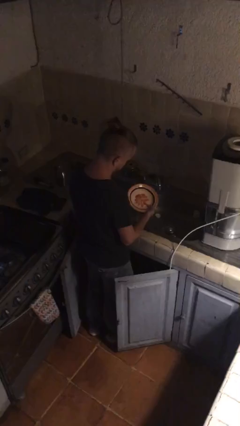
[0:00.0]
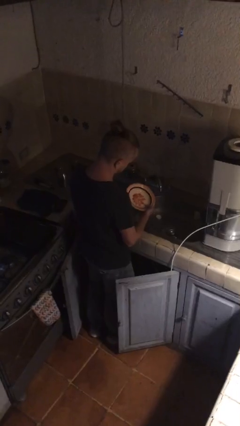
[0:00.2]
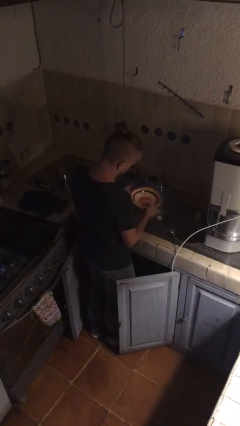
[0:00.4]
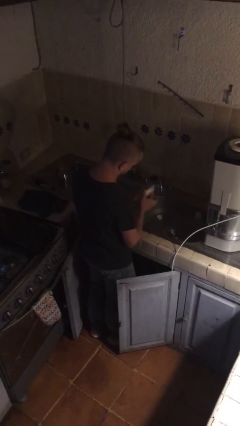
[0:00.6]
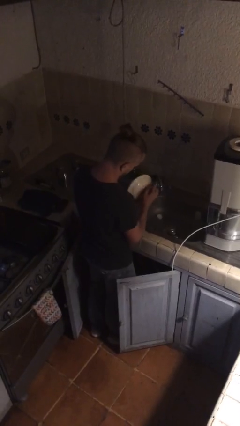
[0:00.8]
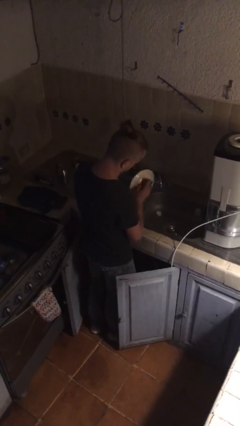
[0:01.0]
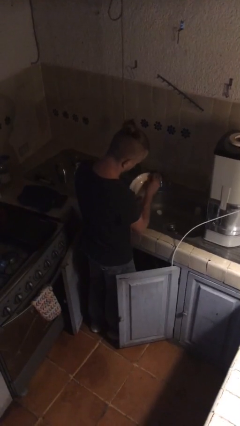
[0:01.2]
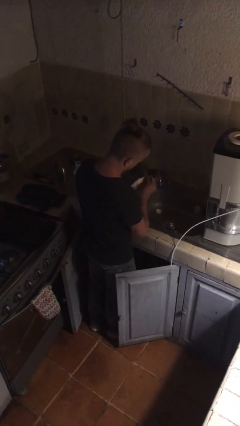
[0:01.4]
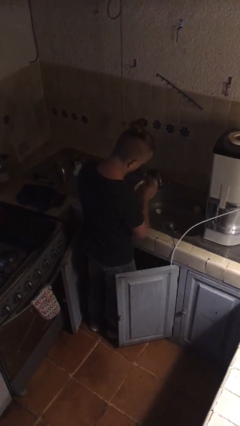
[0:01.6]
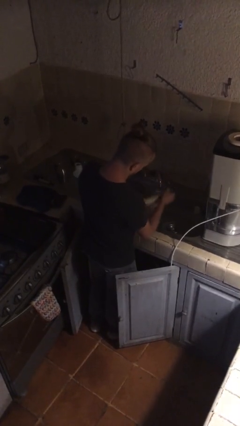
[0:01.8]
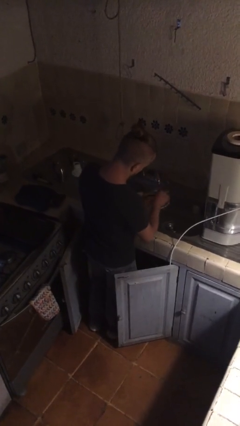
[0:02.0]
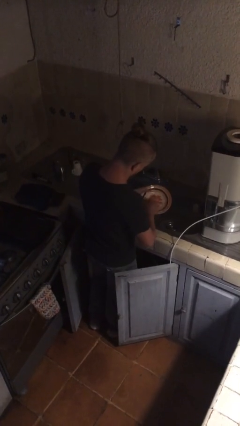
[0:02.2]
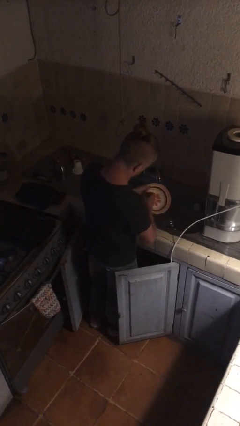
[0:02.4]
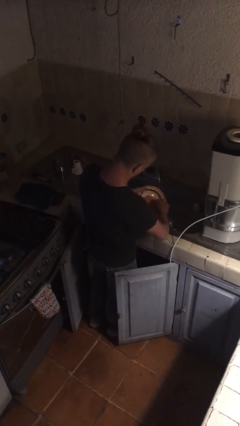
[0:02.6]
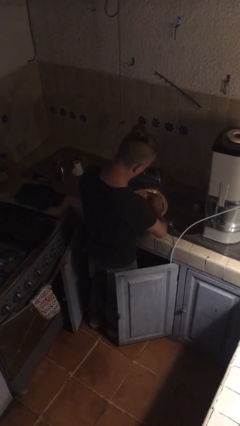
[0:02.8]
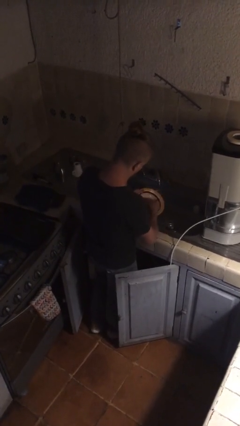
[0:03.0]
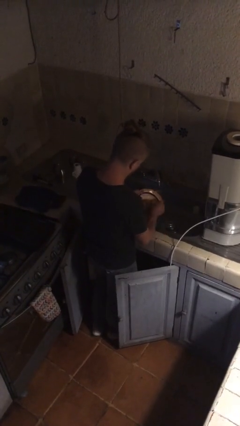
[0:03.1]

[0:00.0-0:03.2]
person washes dish

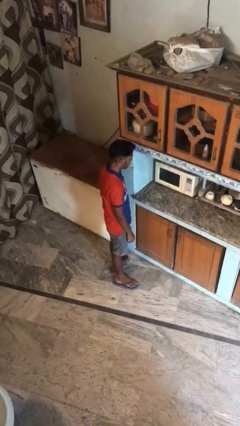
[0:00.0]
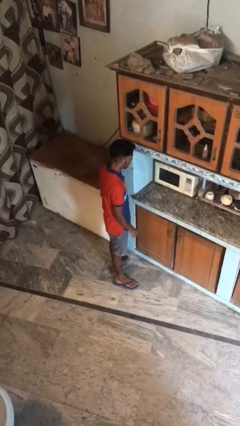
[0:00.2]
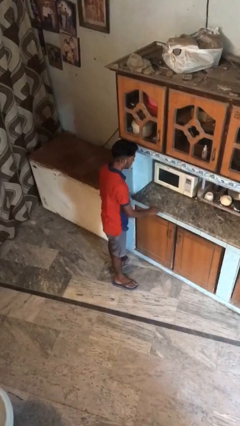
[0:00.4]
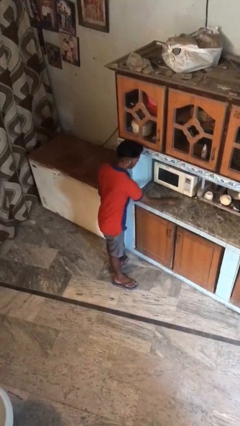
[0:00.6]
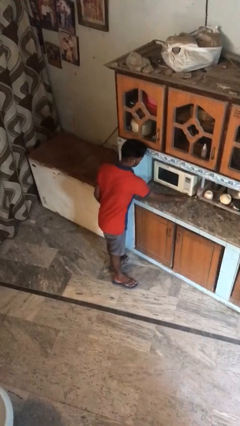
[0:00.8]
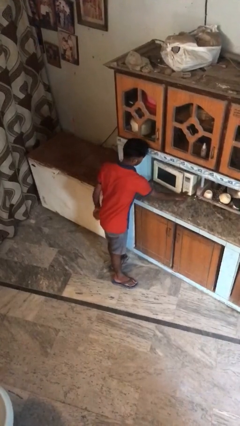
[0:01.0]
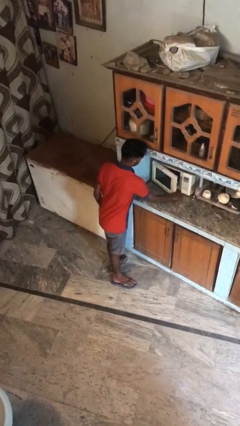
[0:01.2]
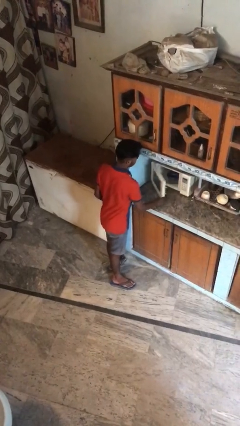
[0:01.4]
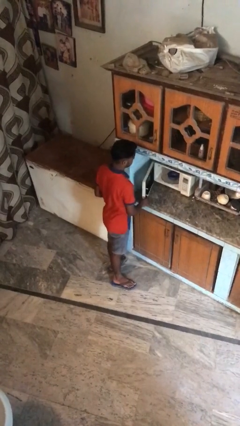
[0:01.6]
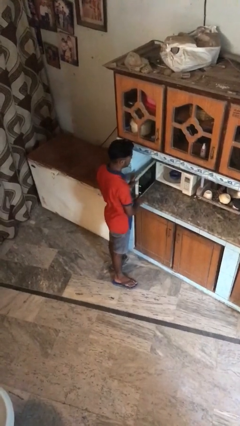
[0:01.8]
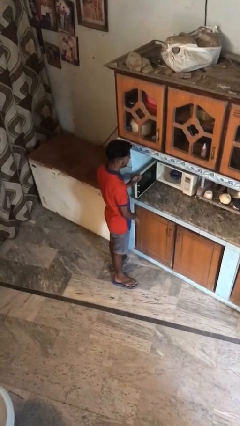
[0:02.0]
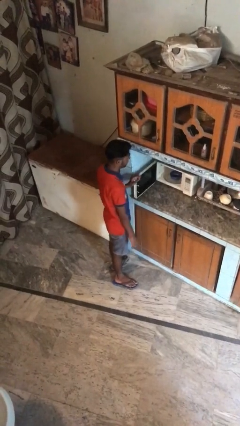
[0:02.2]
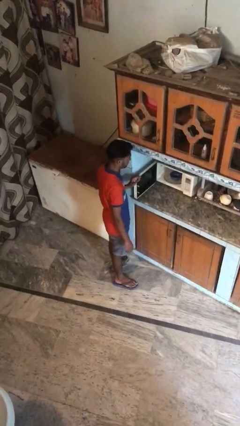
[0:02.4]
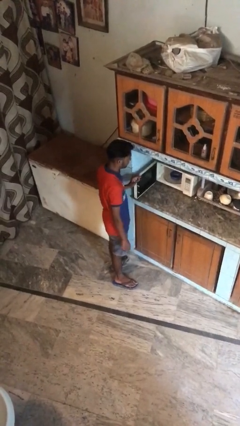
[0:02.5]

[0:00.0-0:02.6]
person opens oven door

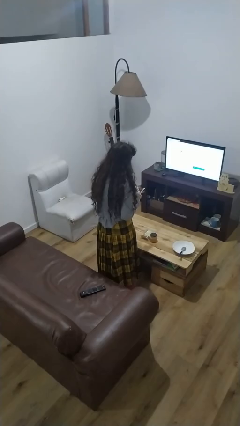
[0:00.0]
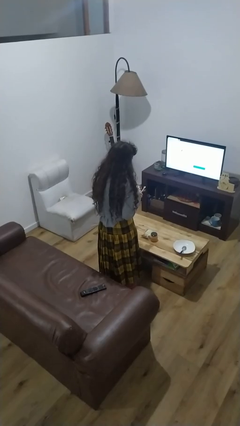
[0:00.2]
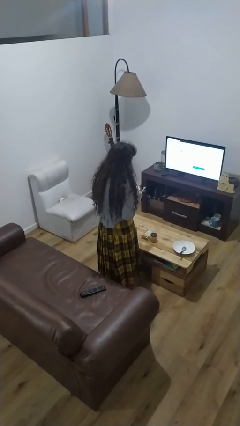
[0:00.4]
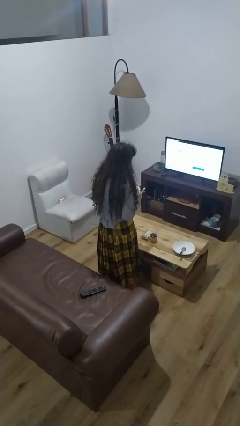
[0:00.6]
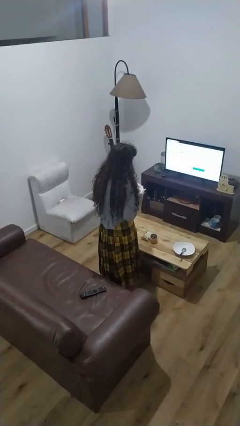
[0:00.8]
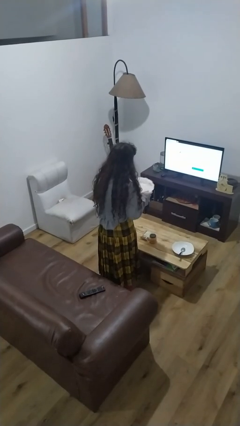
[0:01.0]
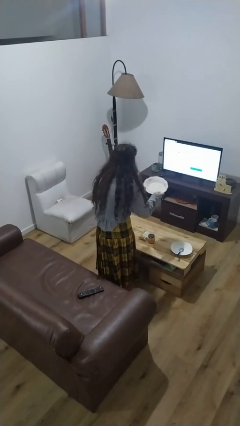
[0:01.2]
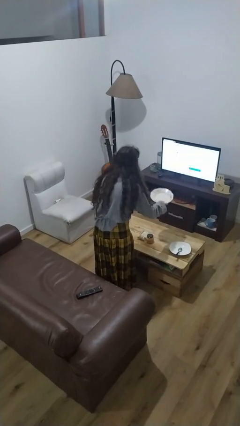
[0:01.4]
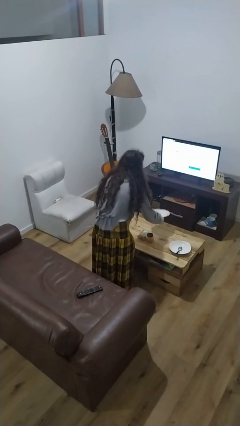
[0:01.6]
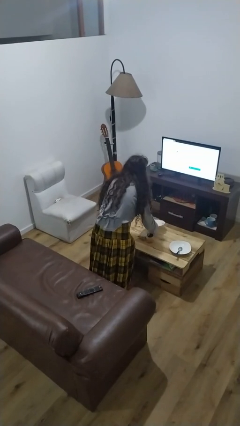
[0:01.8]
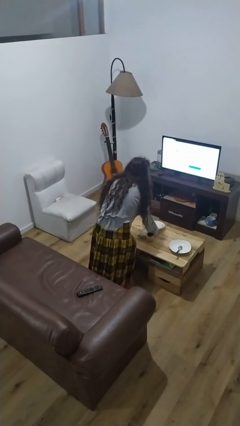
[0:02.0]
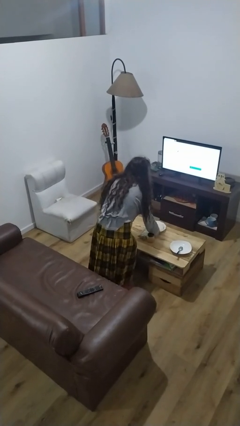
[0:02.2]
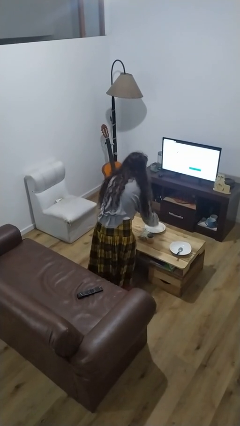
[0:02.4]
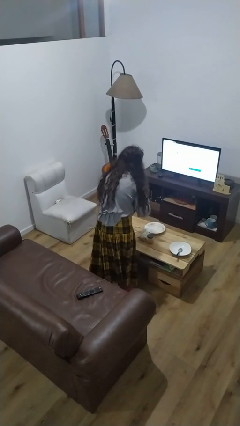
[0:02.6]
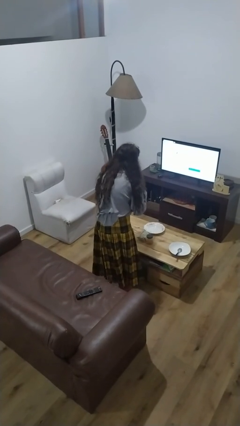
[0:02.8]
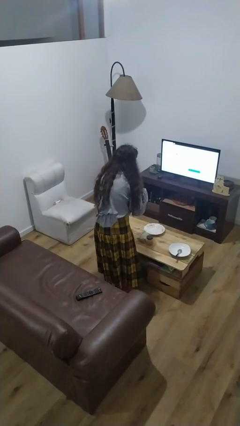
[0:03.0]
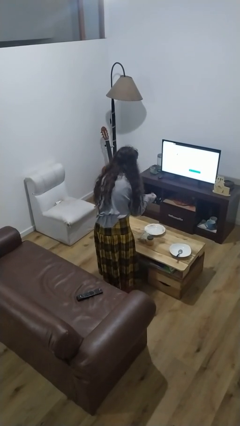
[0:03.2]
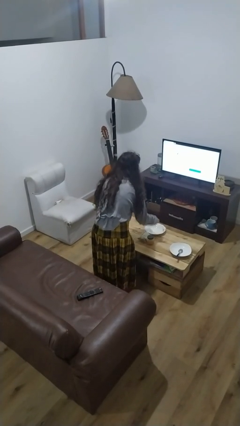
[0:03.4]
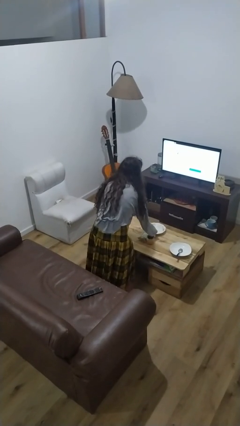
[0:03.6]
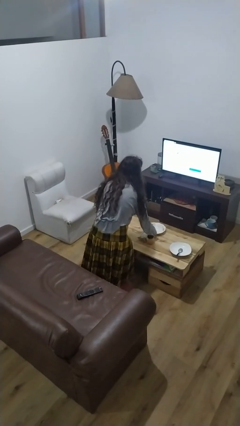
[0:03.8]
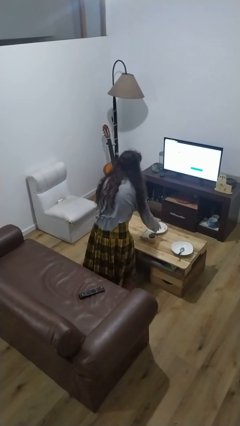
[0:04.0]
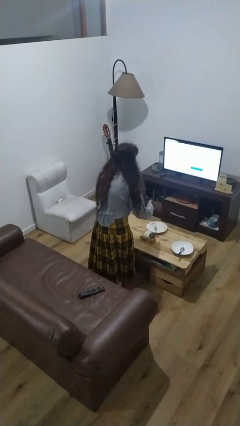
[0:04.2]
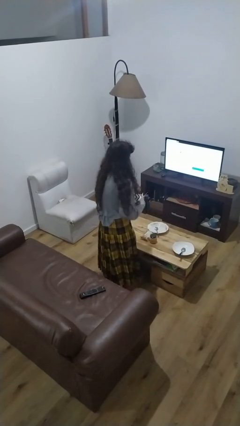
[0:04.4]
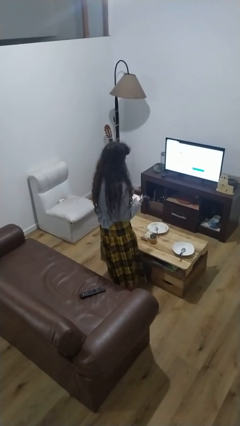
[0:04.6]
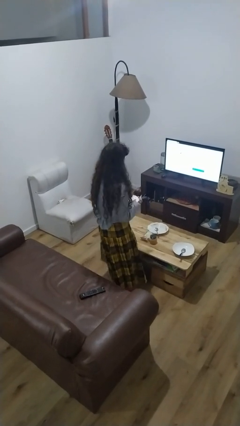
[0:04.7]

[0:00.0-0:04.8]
person sets table

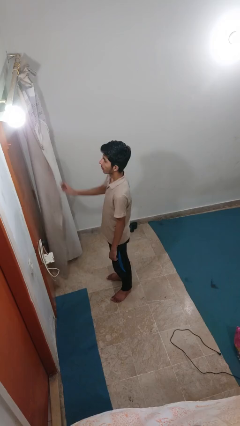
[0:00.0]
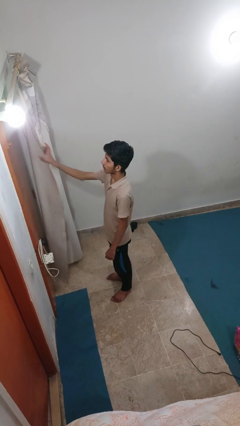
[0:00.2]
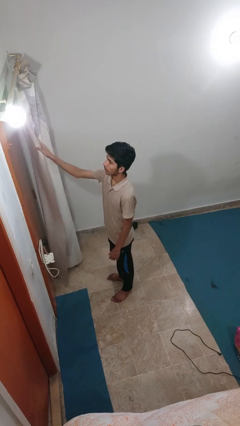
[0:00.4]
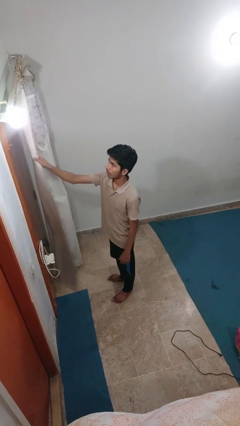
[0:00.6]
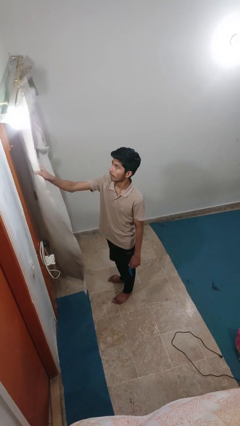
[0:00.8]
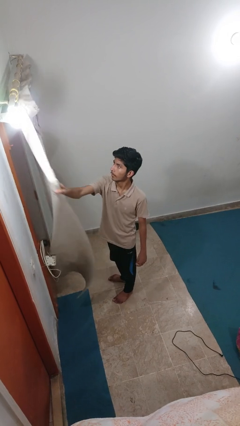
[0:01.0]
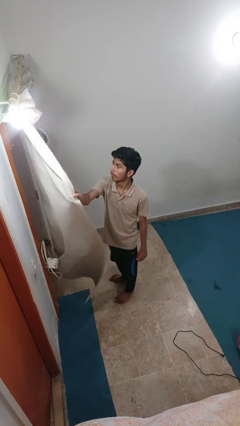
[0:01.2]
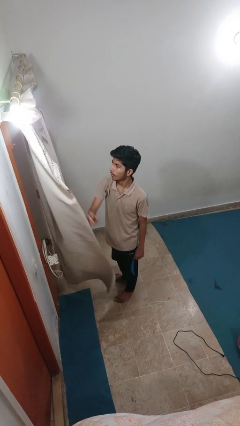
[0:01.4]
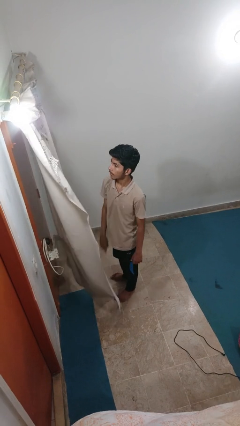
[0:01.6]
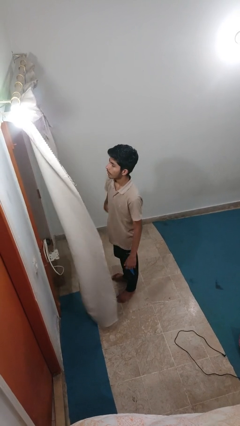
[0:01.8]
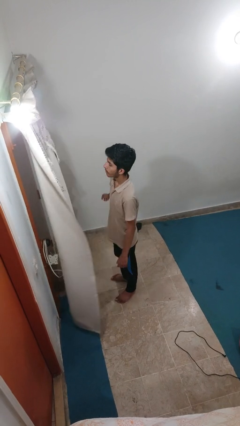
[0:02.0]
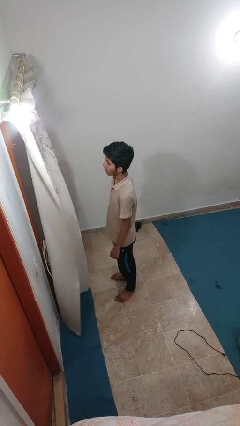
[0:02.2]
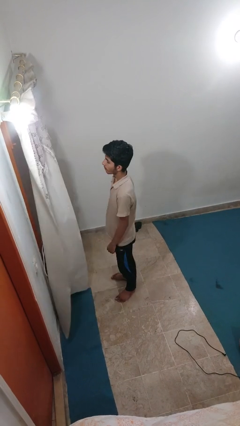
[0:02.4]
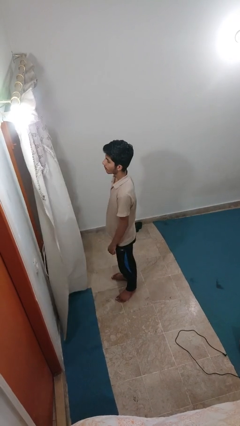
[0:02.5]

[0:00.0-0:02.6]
person closes curtains

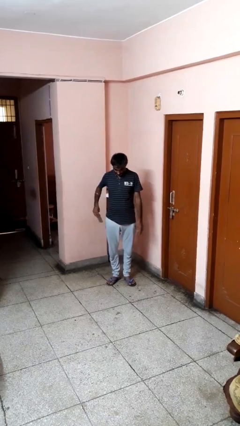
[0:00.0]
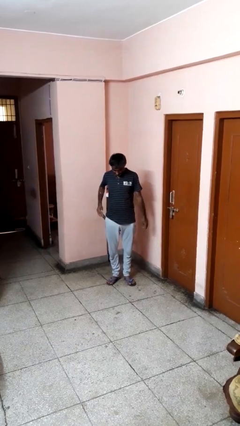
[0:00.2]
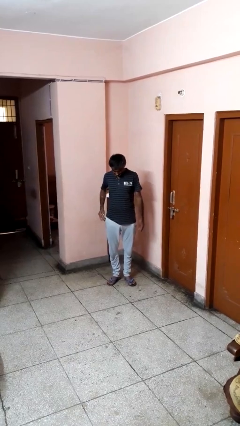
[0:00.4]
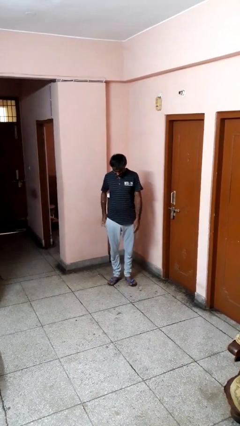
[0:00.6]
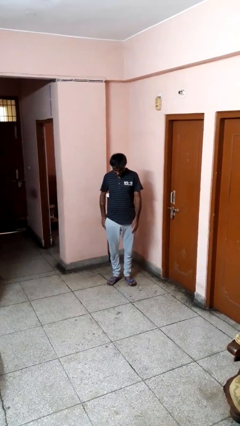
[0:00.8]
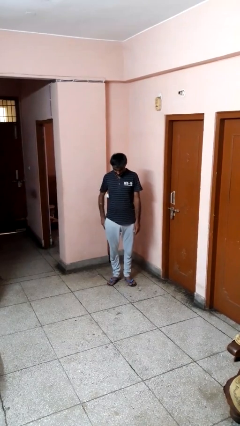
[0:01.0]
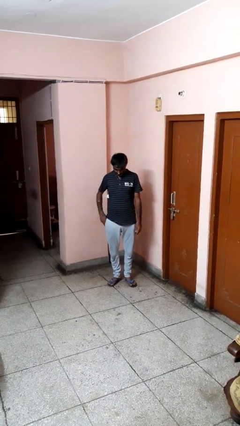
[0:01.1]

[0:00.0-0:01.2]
person puts phone into pocket

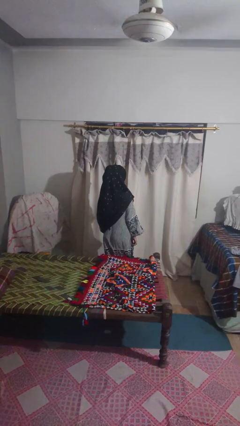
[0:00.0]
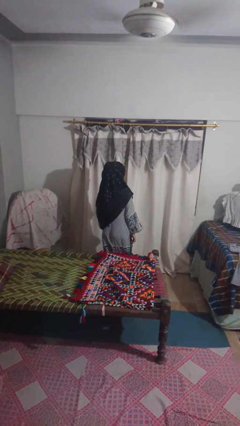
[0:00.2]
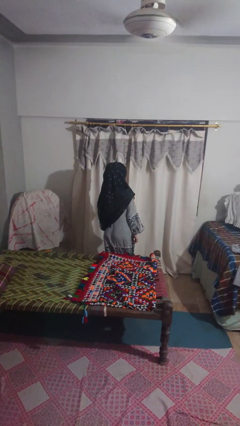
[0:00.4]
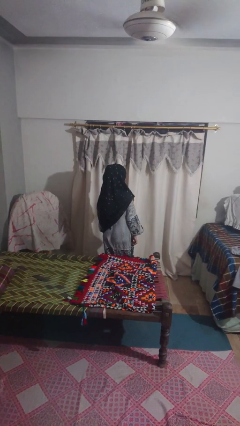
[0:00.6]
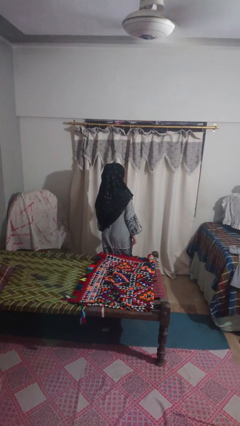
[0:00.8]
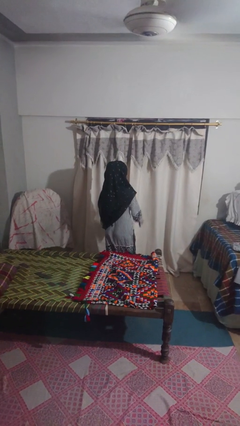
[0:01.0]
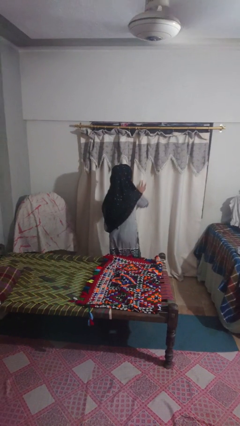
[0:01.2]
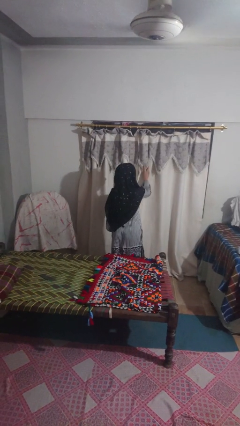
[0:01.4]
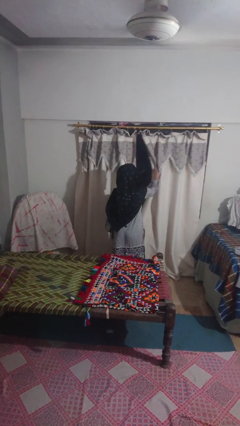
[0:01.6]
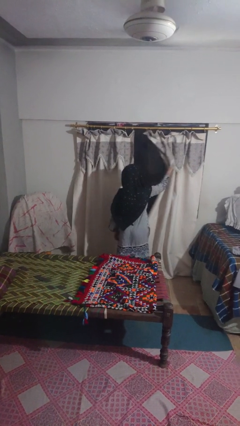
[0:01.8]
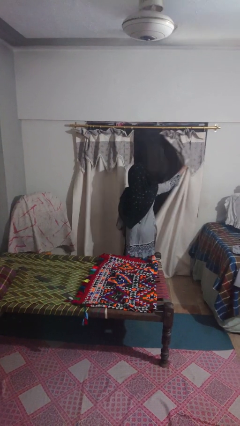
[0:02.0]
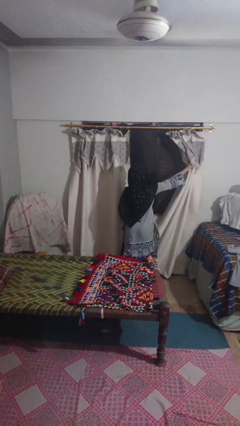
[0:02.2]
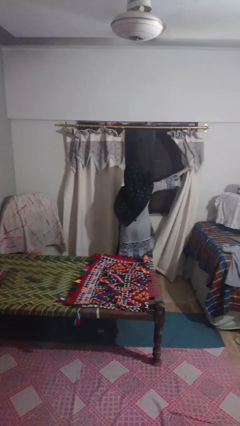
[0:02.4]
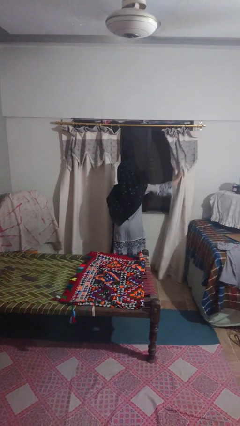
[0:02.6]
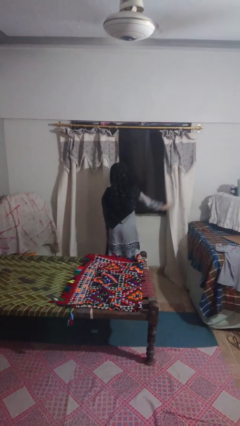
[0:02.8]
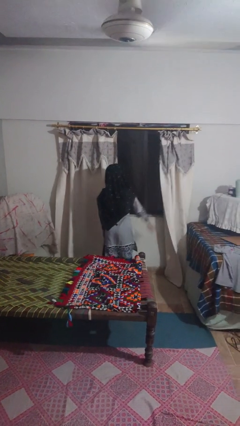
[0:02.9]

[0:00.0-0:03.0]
person opens curtains
